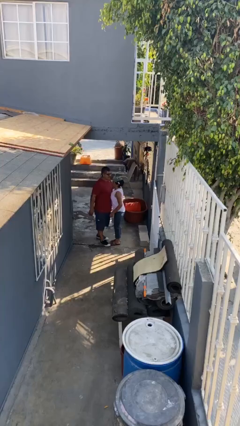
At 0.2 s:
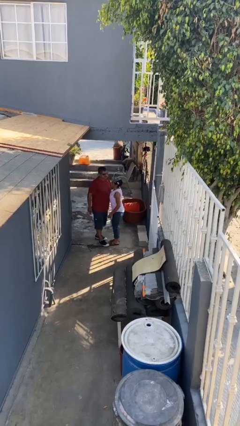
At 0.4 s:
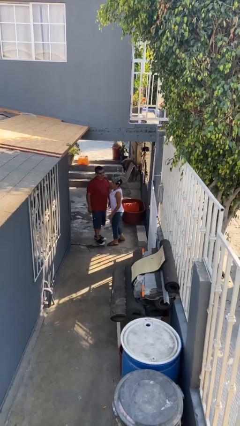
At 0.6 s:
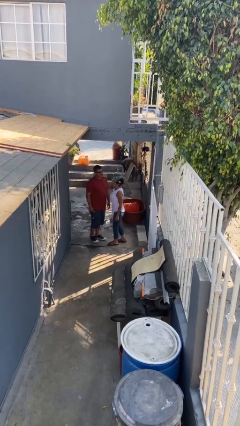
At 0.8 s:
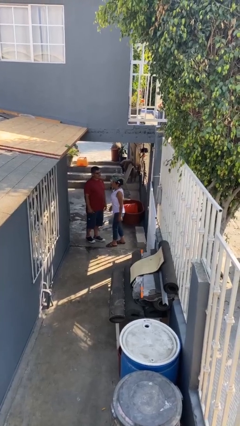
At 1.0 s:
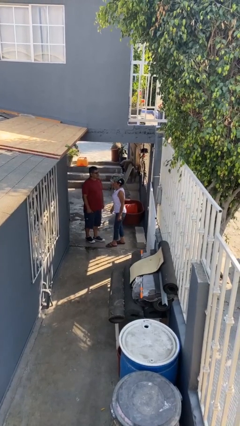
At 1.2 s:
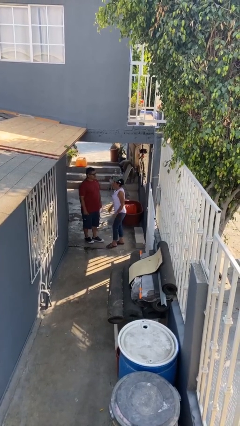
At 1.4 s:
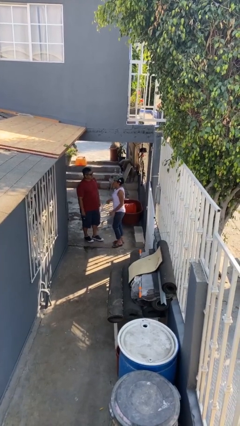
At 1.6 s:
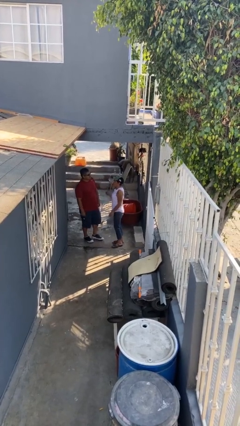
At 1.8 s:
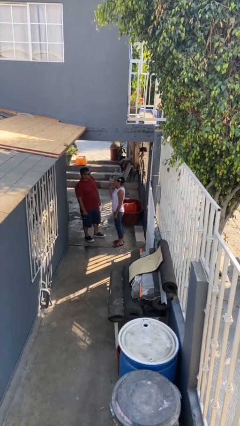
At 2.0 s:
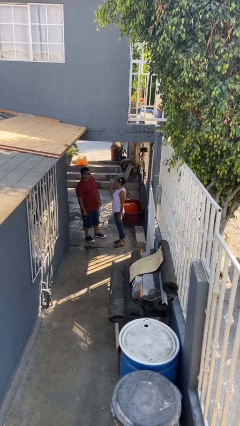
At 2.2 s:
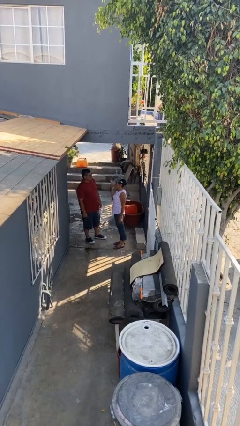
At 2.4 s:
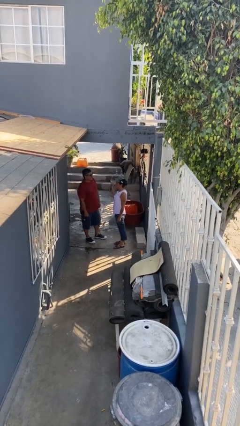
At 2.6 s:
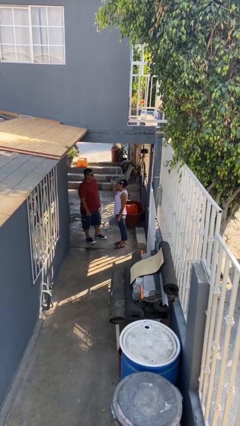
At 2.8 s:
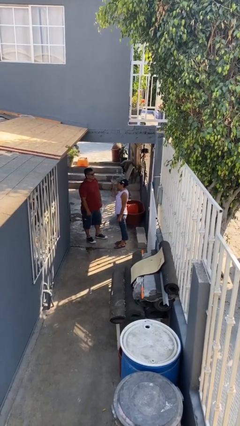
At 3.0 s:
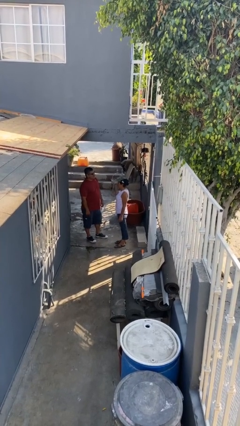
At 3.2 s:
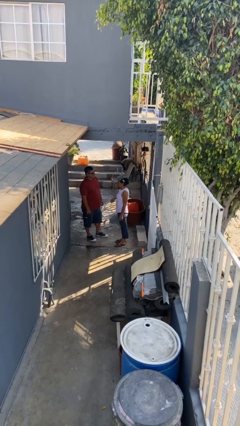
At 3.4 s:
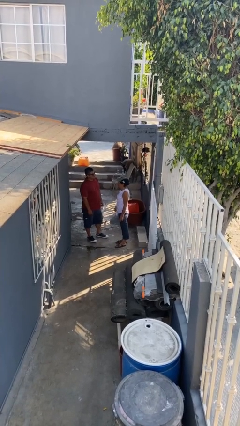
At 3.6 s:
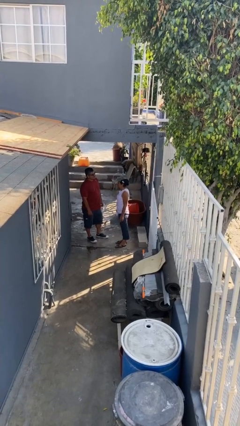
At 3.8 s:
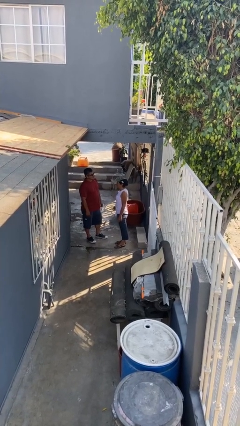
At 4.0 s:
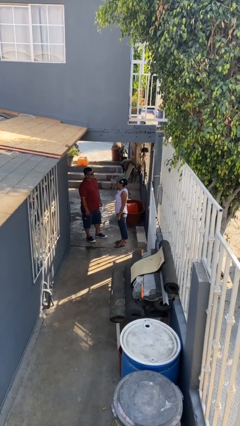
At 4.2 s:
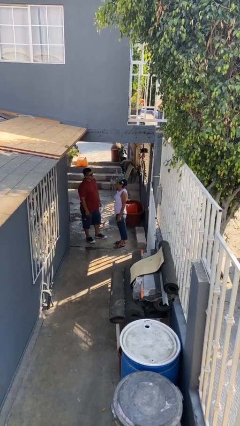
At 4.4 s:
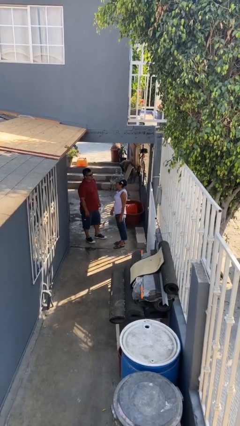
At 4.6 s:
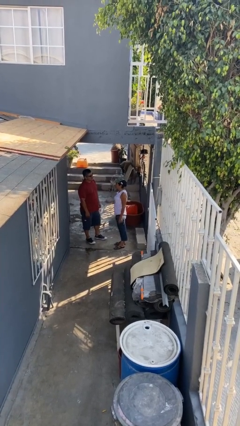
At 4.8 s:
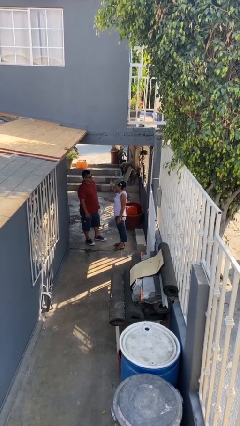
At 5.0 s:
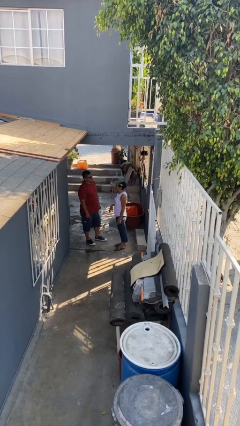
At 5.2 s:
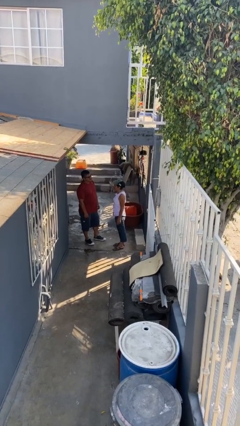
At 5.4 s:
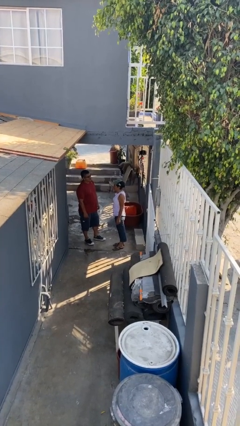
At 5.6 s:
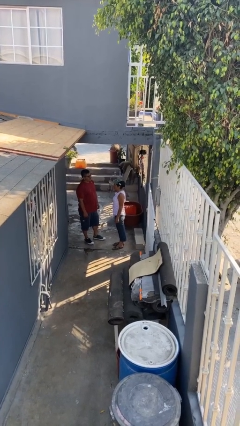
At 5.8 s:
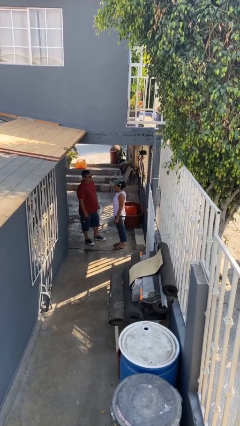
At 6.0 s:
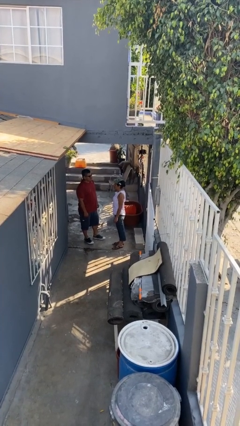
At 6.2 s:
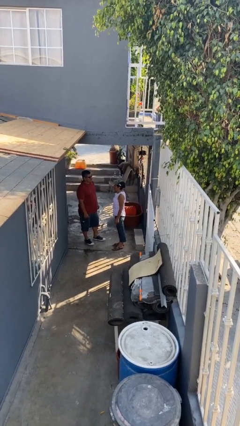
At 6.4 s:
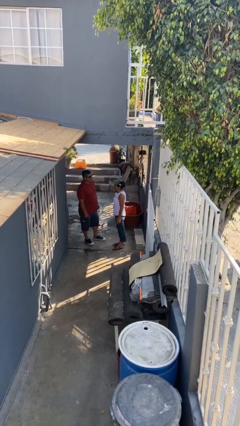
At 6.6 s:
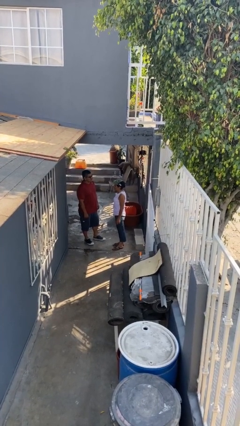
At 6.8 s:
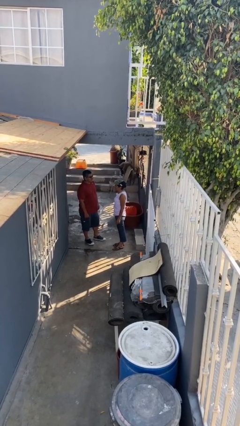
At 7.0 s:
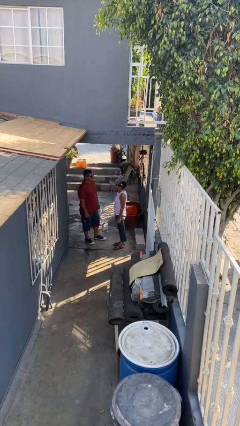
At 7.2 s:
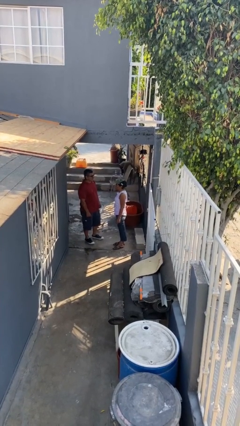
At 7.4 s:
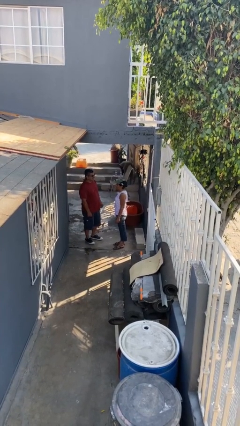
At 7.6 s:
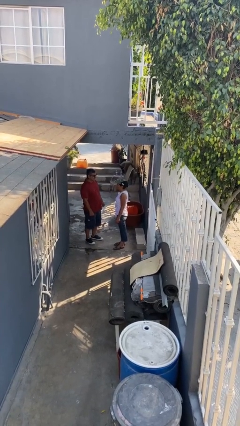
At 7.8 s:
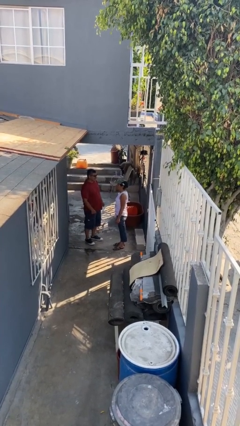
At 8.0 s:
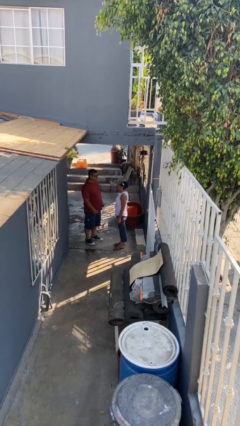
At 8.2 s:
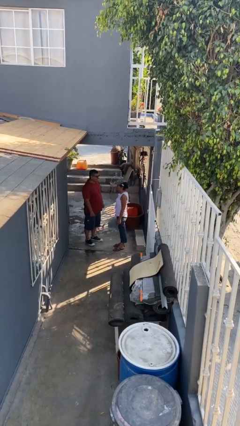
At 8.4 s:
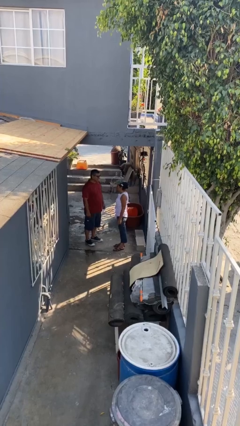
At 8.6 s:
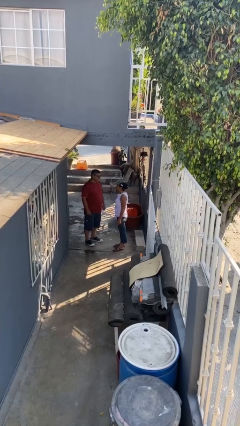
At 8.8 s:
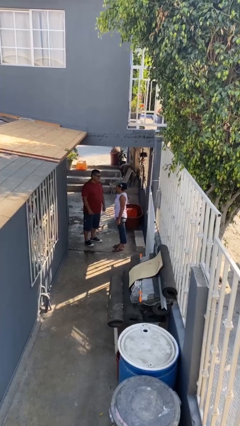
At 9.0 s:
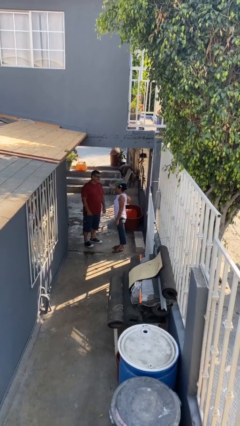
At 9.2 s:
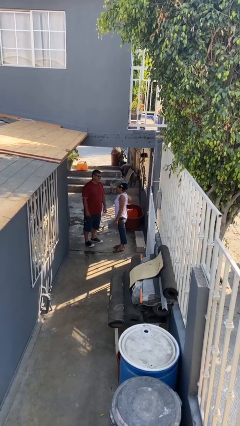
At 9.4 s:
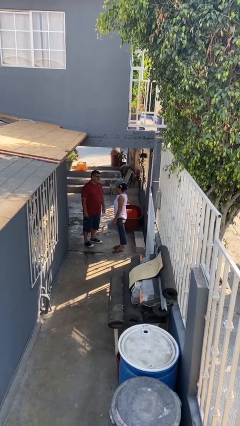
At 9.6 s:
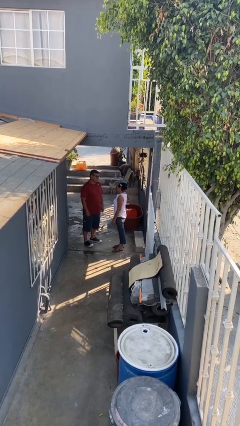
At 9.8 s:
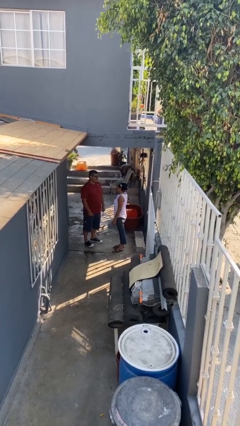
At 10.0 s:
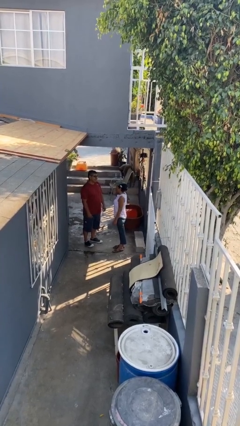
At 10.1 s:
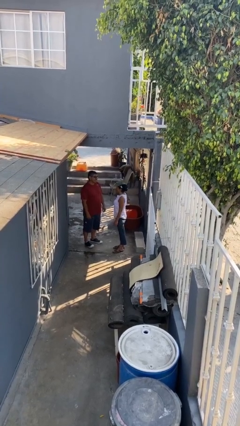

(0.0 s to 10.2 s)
person talks to person

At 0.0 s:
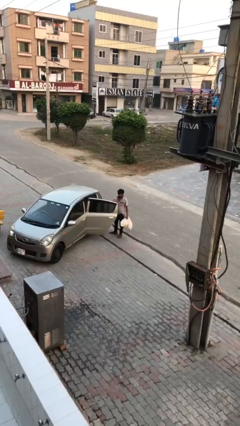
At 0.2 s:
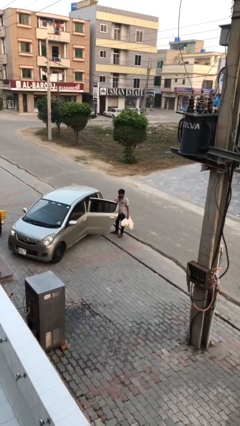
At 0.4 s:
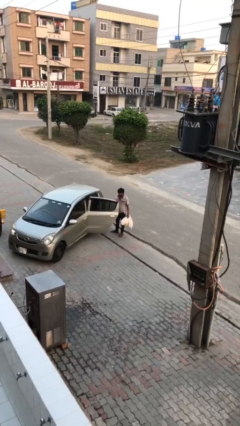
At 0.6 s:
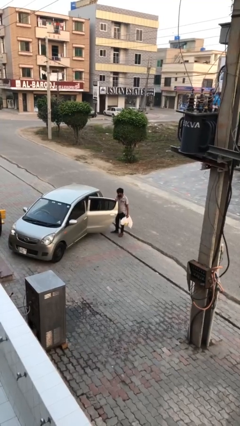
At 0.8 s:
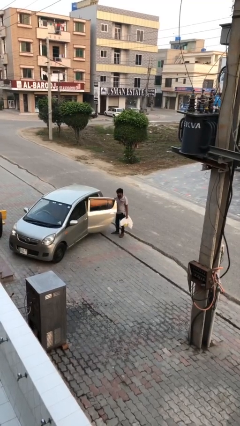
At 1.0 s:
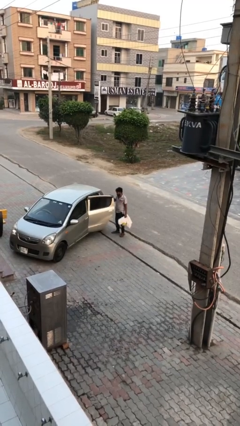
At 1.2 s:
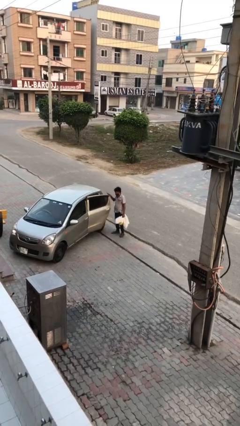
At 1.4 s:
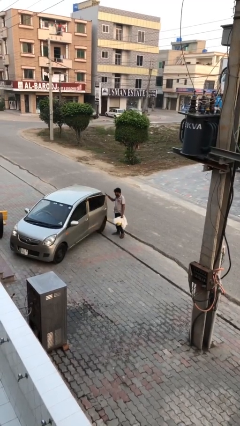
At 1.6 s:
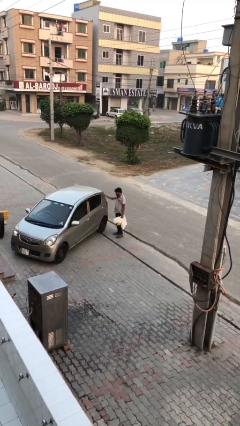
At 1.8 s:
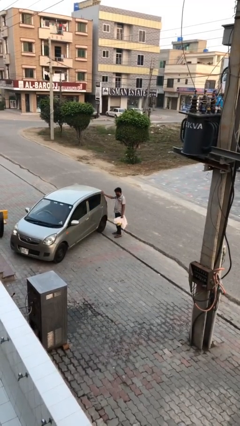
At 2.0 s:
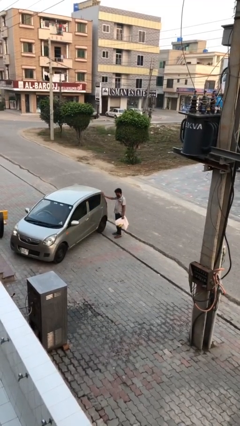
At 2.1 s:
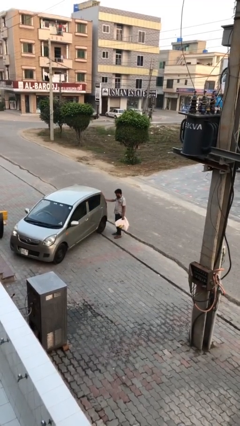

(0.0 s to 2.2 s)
person closes car door

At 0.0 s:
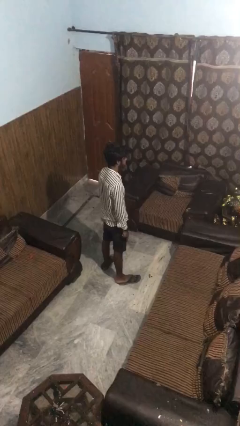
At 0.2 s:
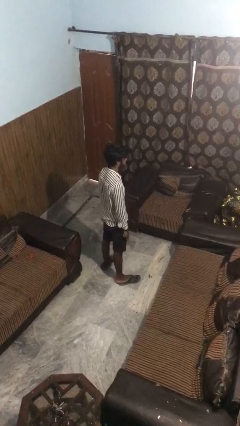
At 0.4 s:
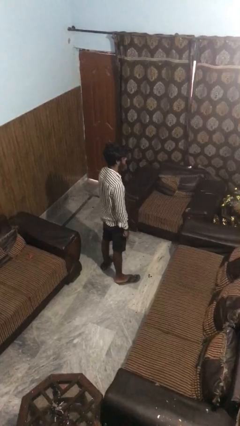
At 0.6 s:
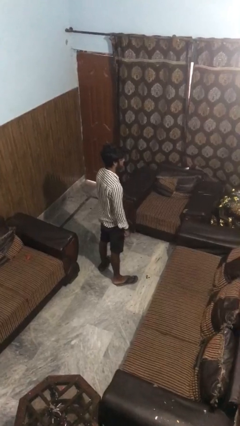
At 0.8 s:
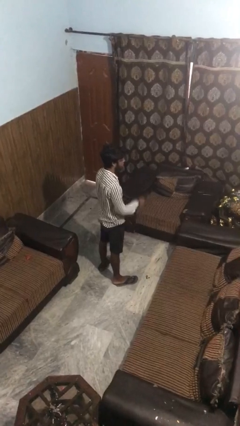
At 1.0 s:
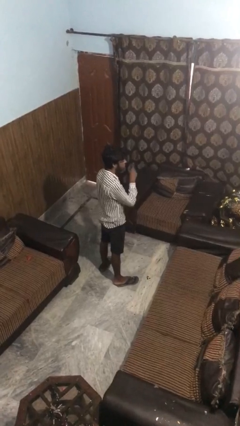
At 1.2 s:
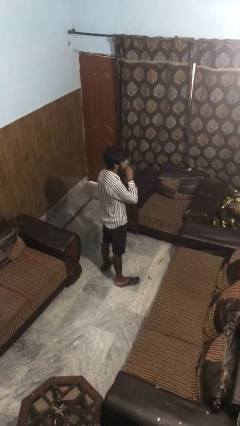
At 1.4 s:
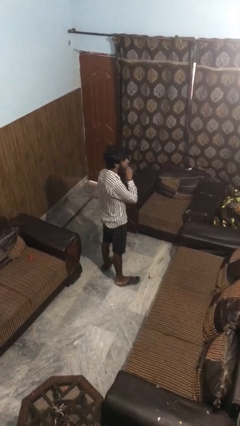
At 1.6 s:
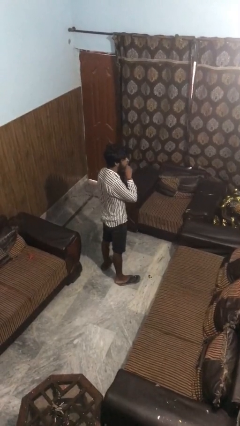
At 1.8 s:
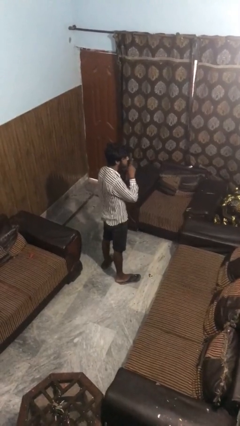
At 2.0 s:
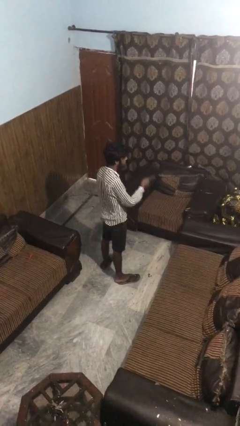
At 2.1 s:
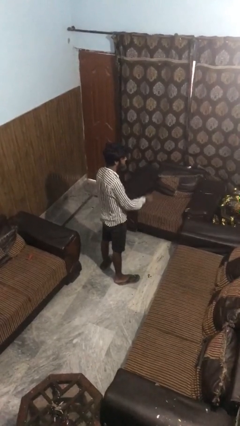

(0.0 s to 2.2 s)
person gestures be quiet

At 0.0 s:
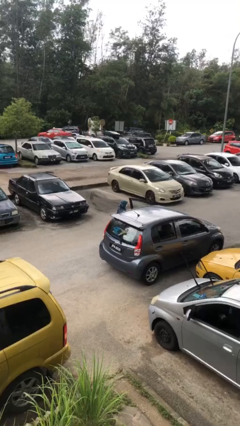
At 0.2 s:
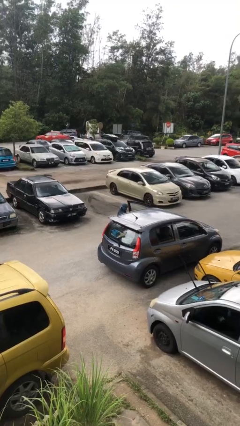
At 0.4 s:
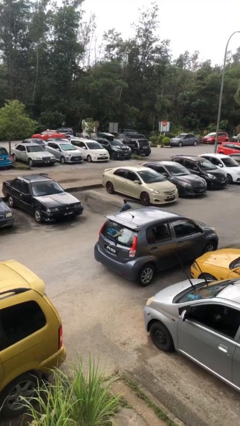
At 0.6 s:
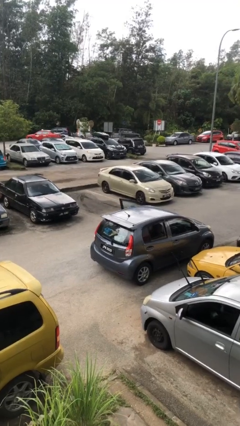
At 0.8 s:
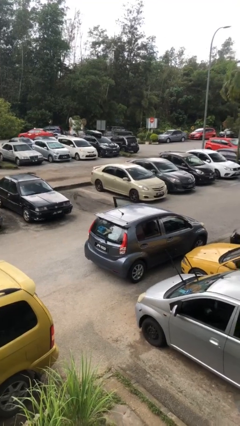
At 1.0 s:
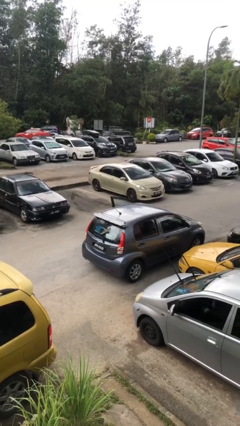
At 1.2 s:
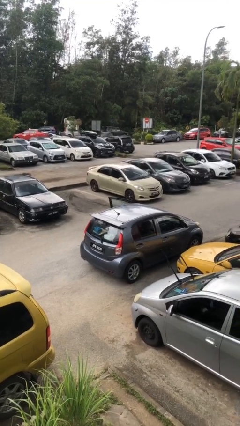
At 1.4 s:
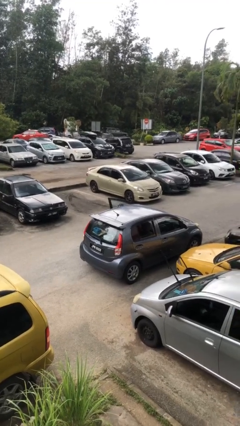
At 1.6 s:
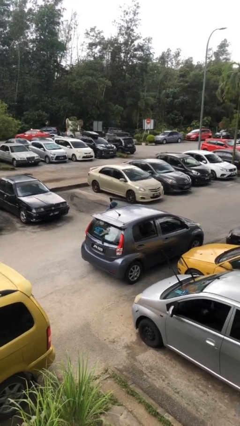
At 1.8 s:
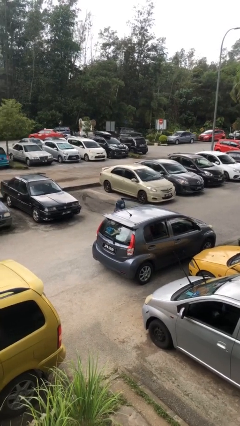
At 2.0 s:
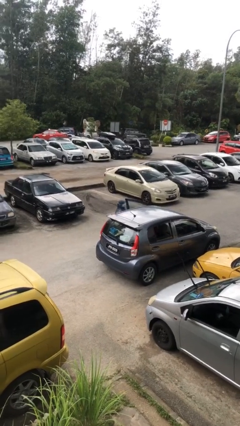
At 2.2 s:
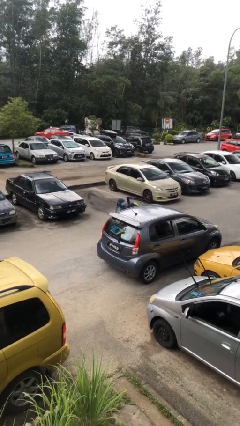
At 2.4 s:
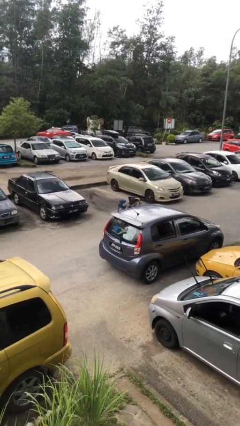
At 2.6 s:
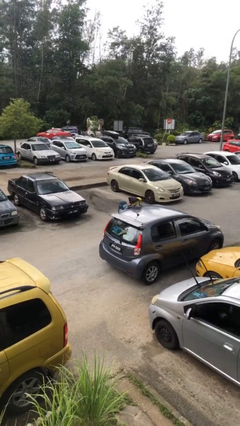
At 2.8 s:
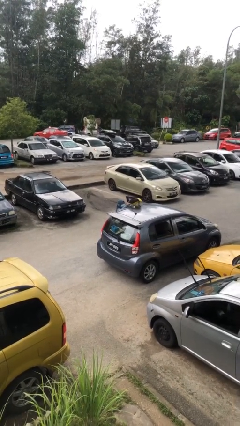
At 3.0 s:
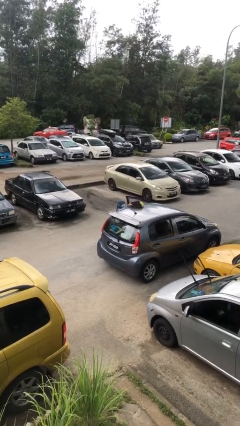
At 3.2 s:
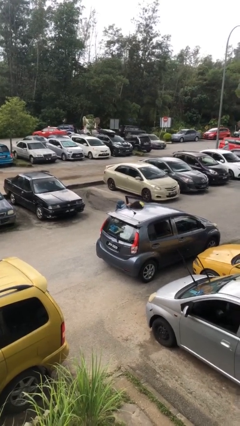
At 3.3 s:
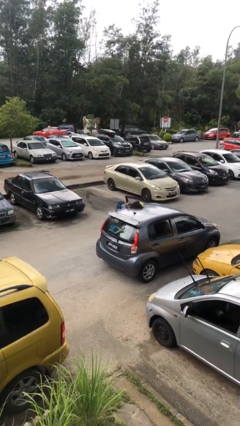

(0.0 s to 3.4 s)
person unloads car
